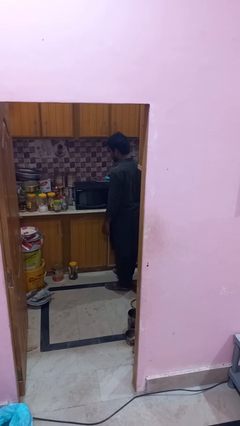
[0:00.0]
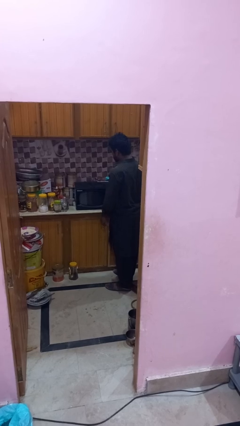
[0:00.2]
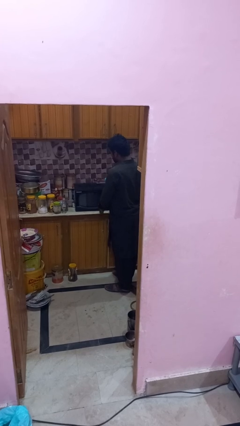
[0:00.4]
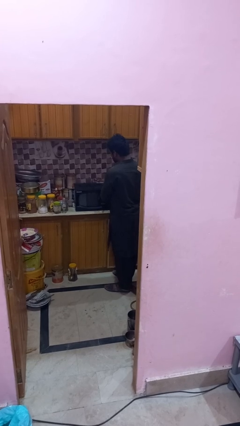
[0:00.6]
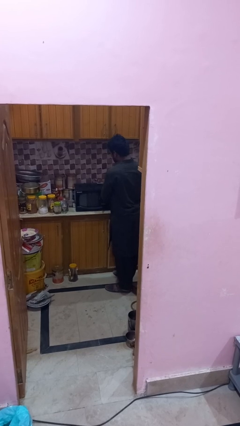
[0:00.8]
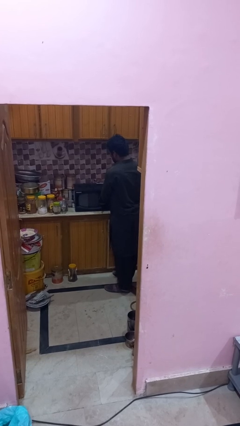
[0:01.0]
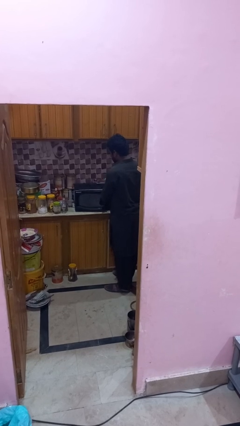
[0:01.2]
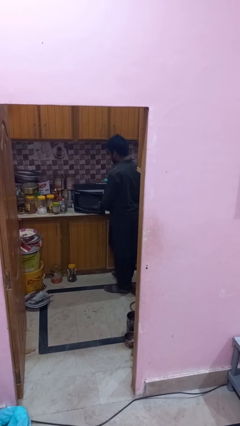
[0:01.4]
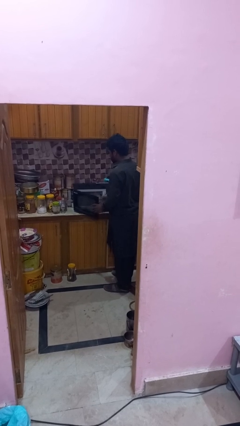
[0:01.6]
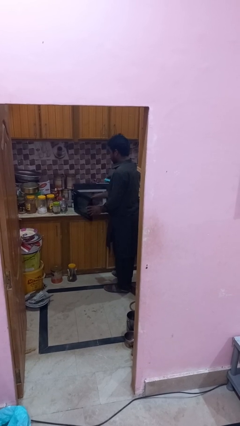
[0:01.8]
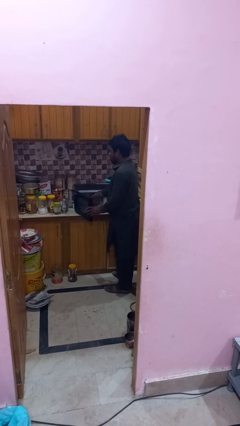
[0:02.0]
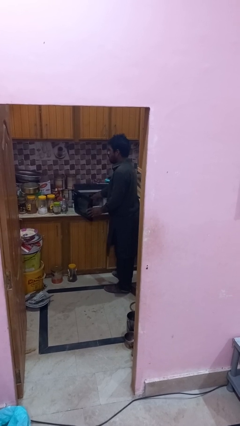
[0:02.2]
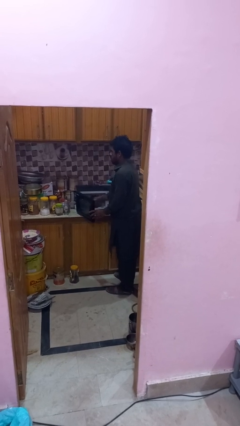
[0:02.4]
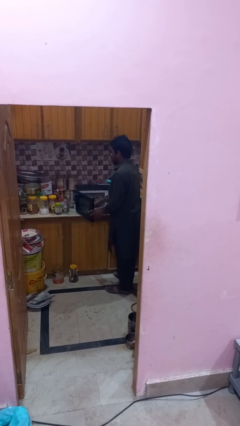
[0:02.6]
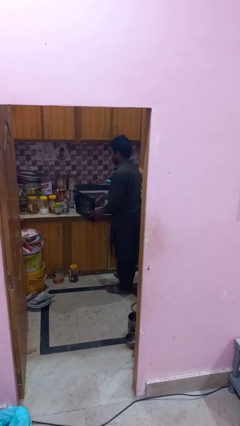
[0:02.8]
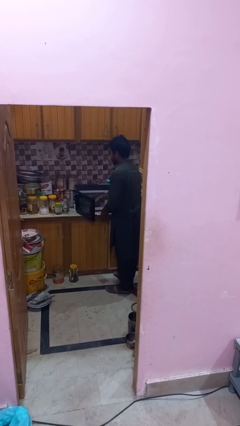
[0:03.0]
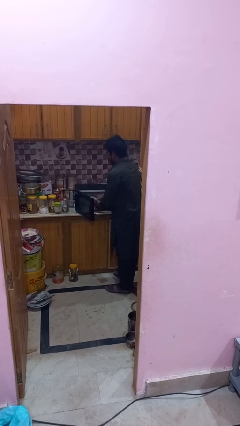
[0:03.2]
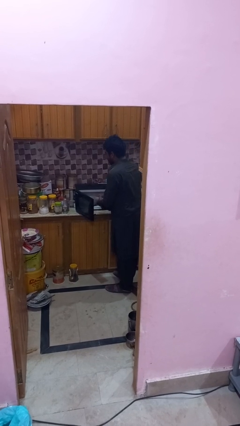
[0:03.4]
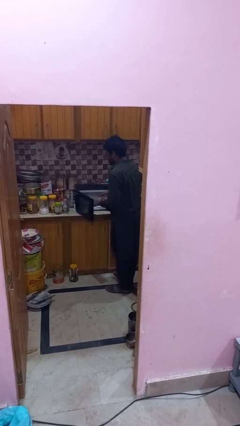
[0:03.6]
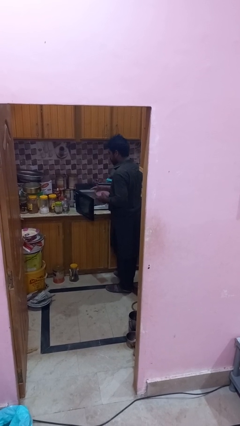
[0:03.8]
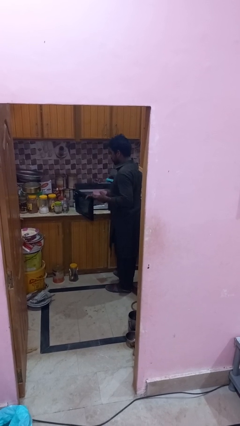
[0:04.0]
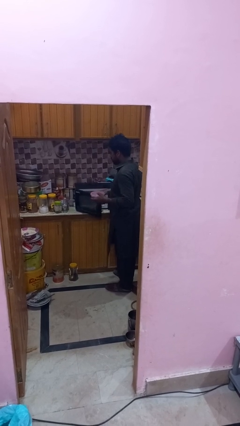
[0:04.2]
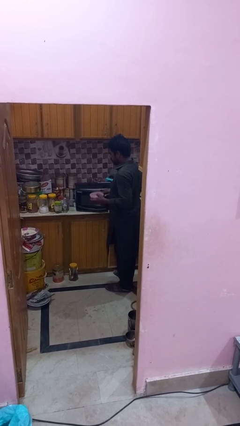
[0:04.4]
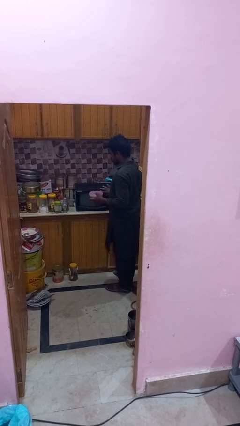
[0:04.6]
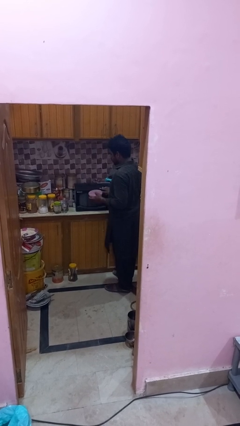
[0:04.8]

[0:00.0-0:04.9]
person takes object from microwave

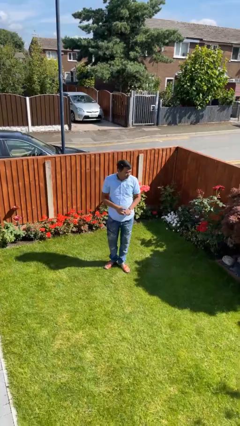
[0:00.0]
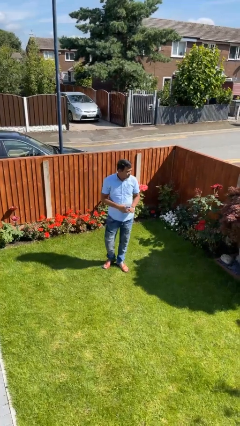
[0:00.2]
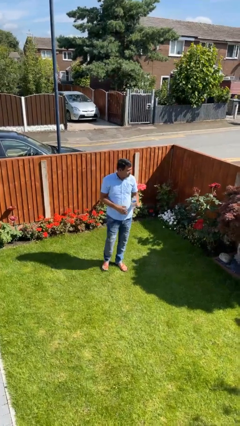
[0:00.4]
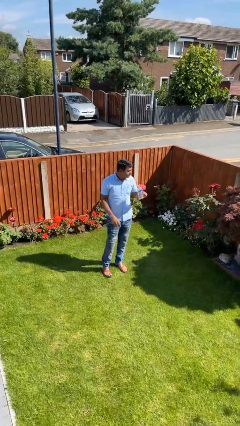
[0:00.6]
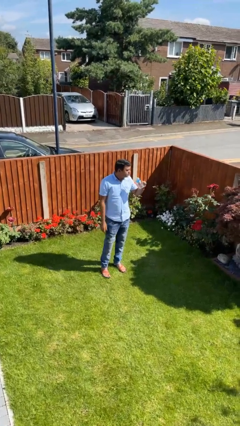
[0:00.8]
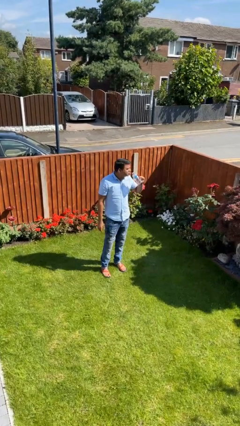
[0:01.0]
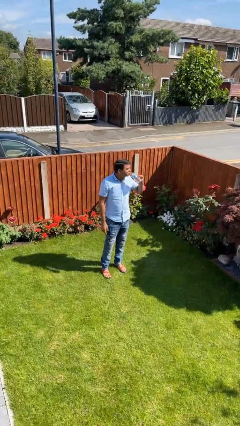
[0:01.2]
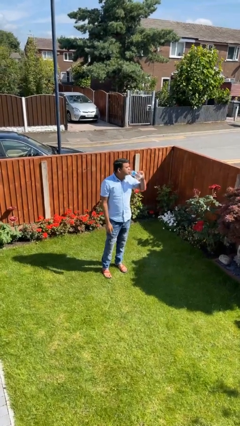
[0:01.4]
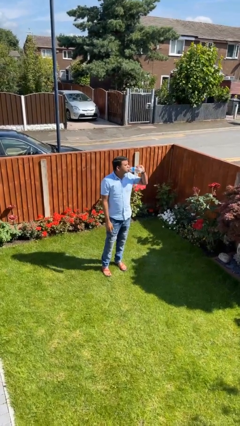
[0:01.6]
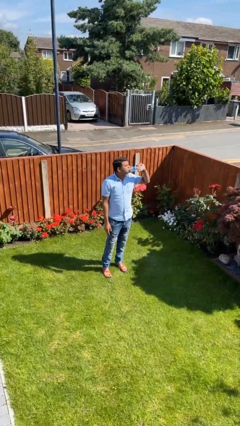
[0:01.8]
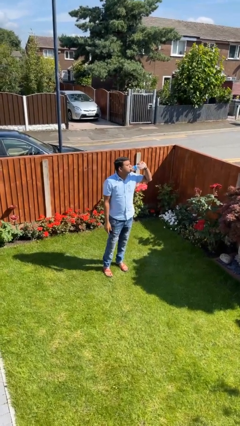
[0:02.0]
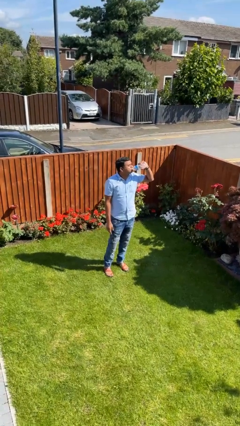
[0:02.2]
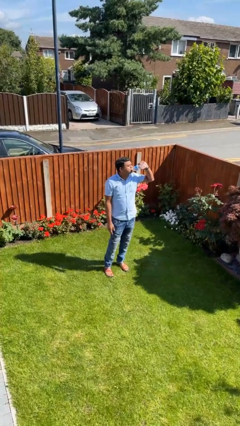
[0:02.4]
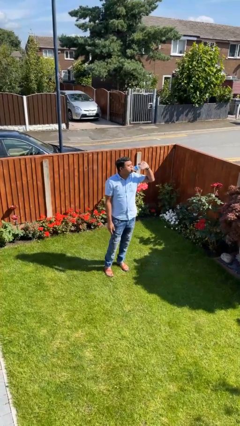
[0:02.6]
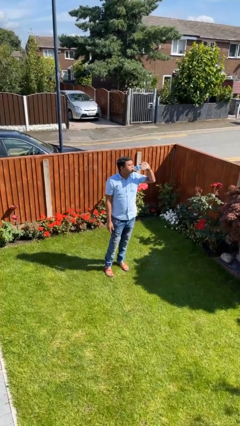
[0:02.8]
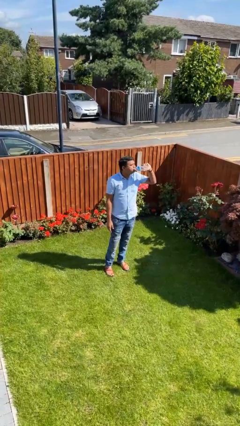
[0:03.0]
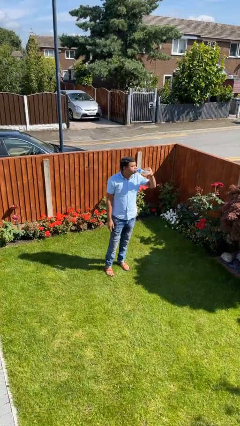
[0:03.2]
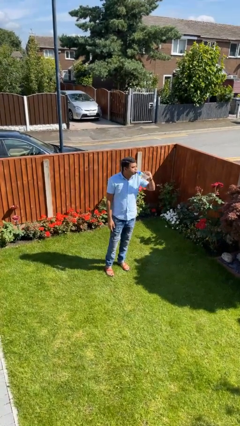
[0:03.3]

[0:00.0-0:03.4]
person drinks from bottle

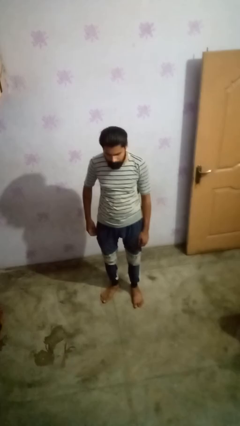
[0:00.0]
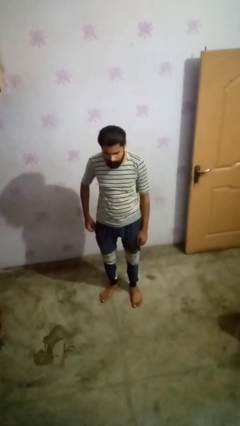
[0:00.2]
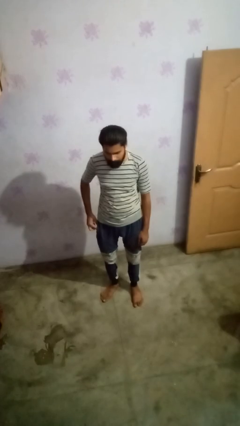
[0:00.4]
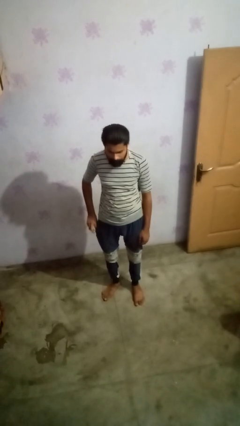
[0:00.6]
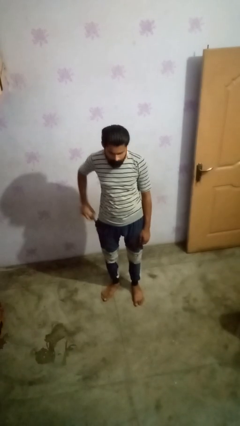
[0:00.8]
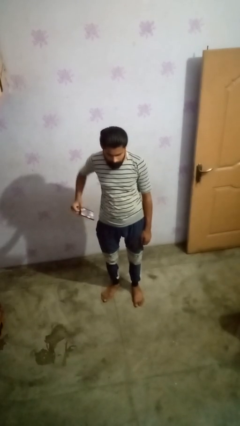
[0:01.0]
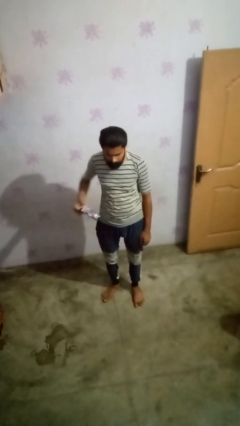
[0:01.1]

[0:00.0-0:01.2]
person takes phone from pocket

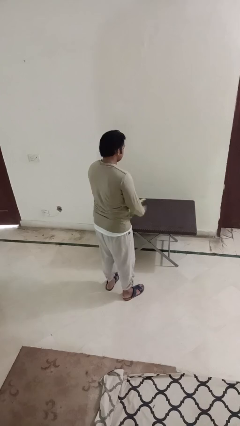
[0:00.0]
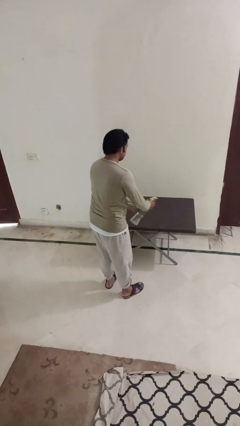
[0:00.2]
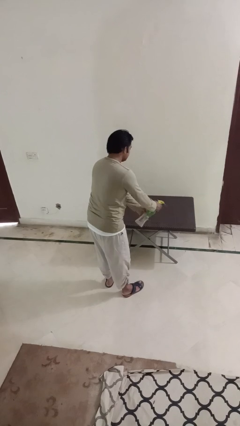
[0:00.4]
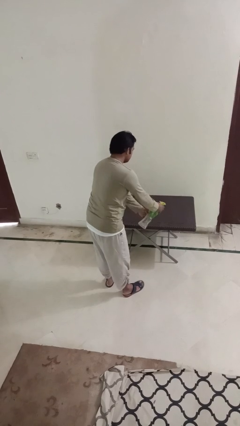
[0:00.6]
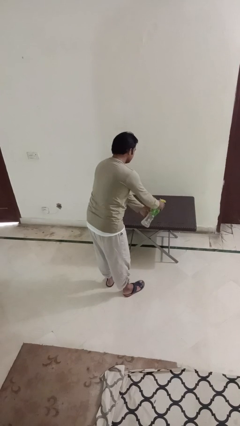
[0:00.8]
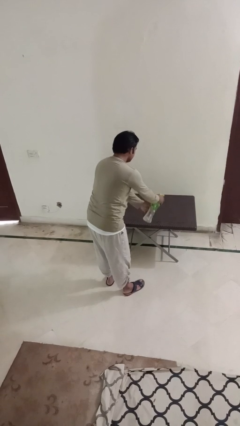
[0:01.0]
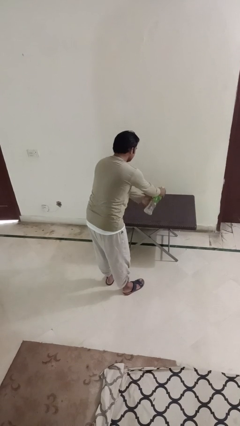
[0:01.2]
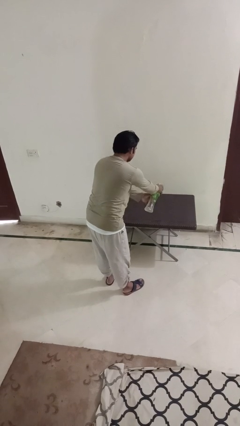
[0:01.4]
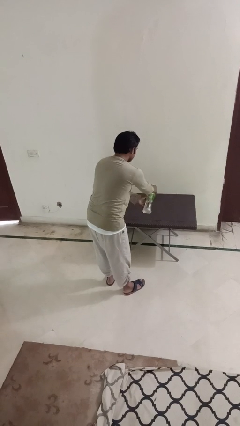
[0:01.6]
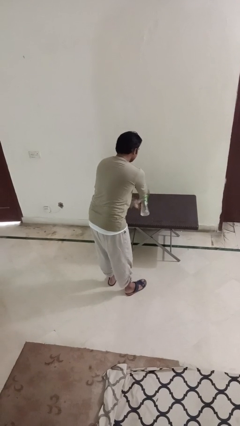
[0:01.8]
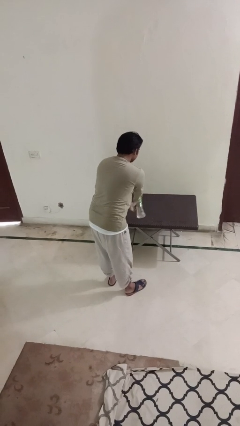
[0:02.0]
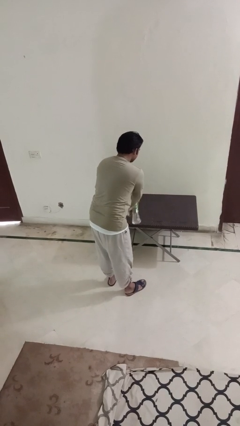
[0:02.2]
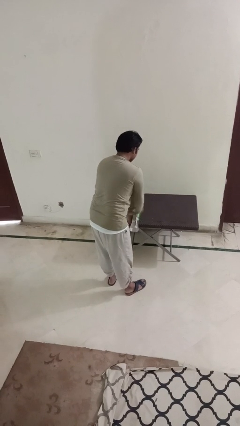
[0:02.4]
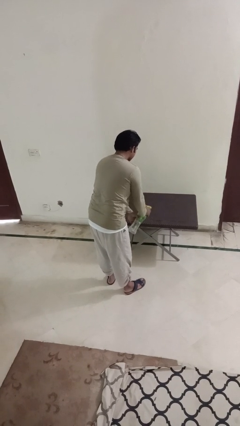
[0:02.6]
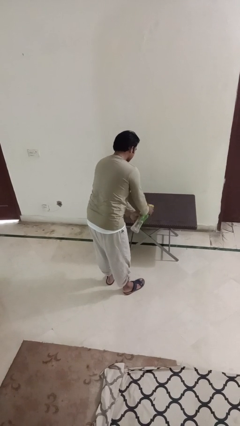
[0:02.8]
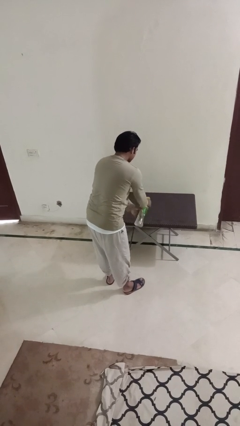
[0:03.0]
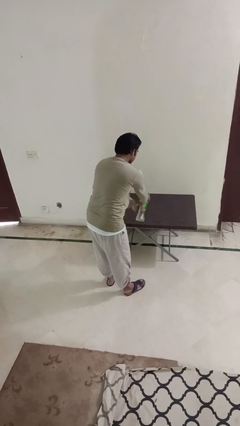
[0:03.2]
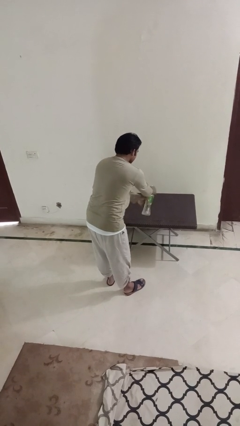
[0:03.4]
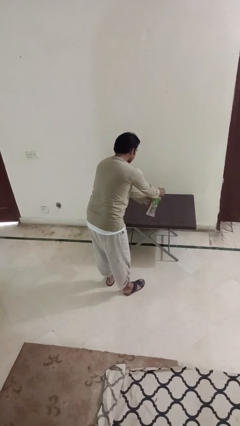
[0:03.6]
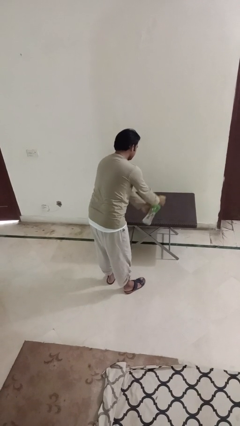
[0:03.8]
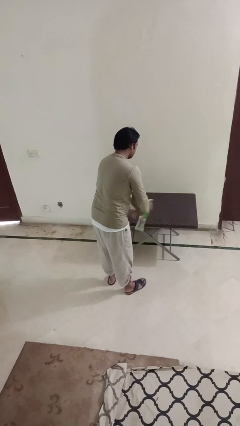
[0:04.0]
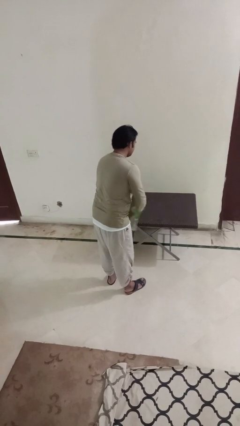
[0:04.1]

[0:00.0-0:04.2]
person sprays from bottle

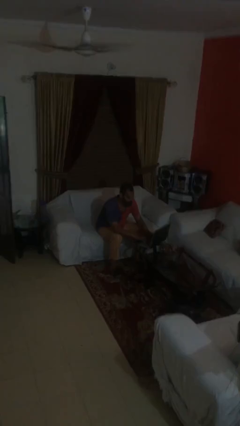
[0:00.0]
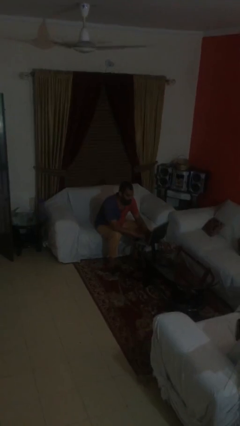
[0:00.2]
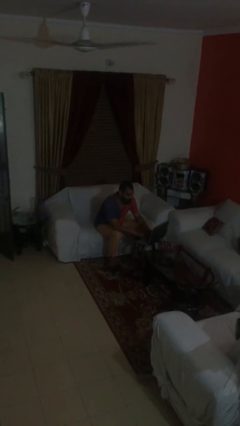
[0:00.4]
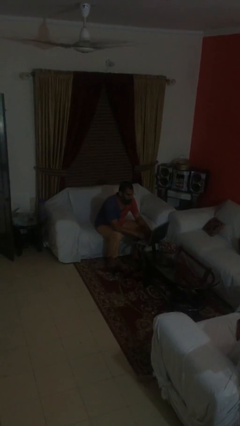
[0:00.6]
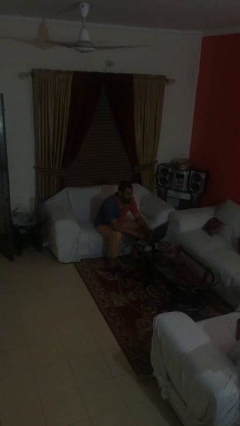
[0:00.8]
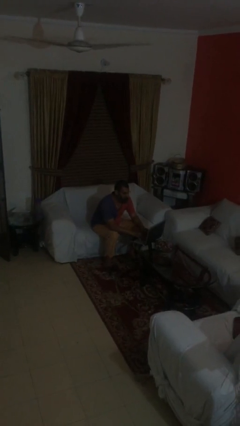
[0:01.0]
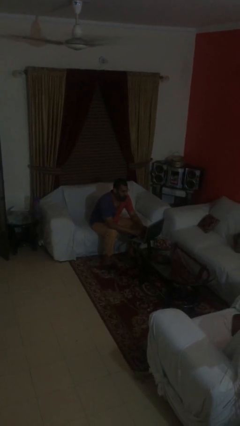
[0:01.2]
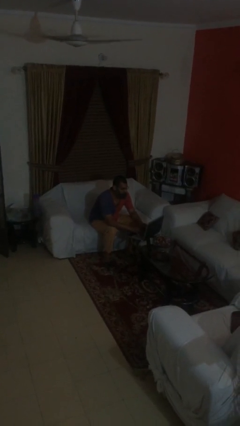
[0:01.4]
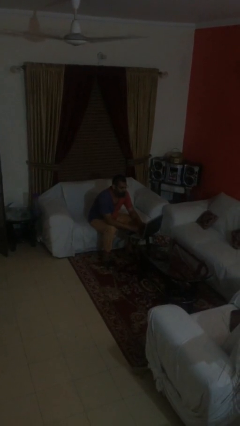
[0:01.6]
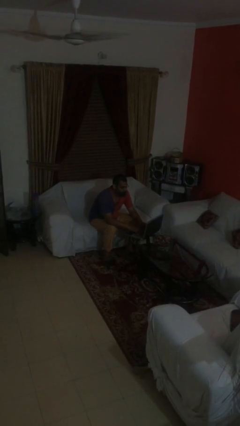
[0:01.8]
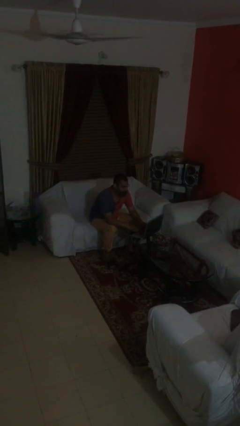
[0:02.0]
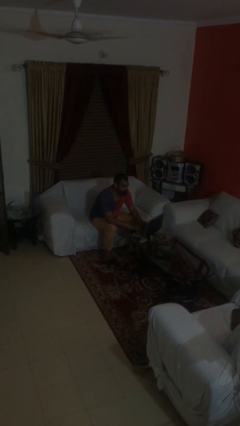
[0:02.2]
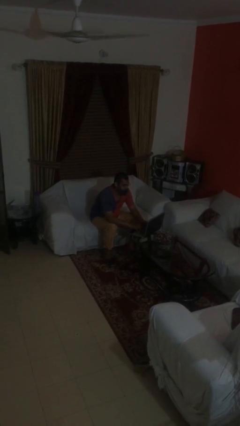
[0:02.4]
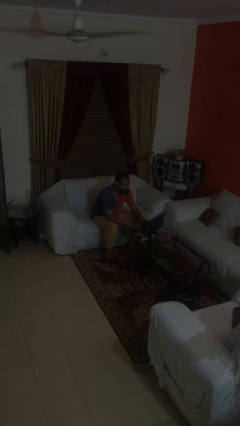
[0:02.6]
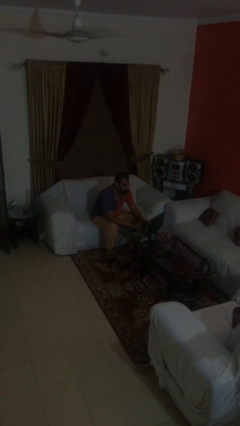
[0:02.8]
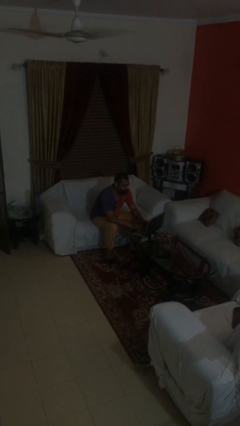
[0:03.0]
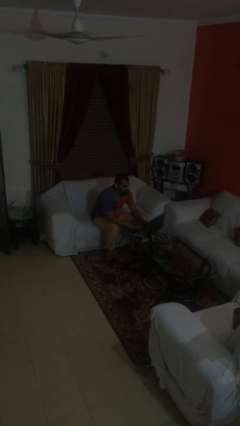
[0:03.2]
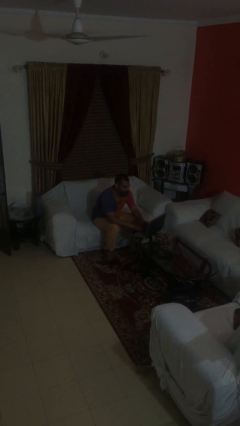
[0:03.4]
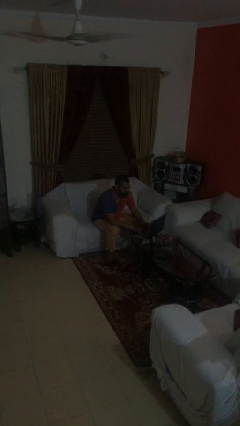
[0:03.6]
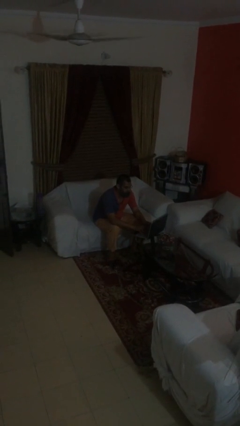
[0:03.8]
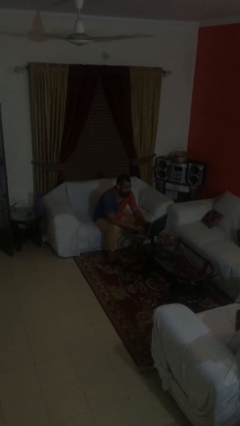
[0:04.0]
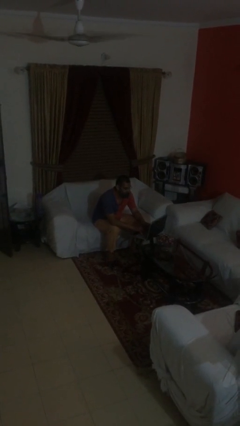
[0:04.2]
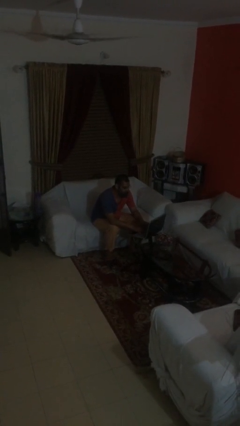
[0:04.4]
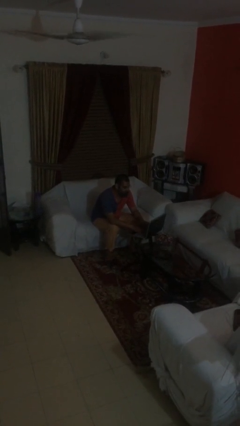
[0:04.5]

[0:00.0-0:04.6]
person interacts with laptop
